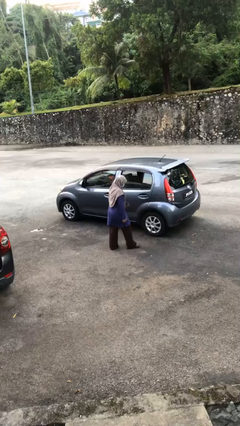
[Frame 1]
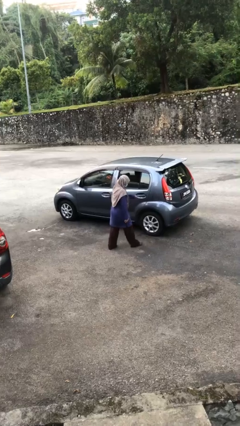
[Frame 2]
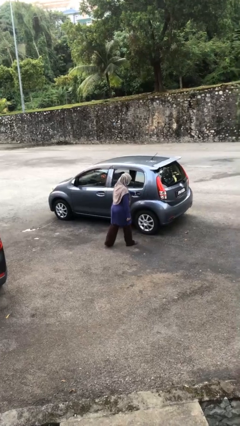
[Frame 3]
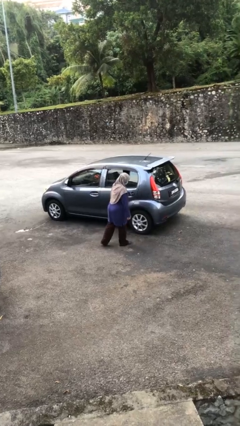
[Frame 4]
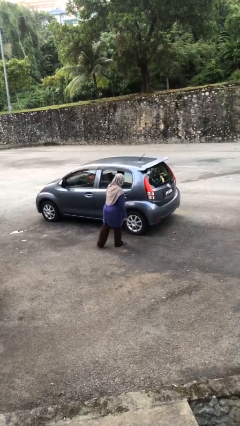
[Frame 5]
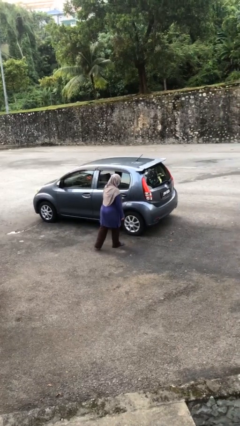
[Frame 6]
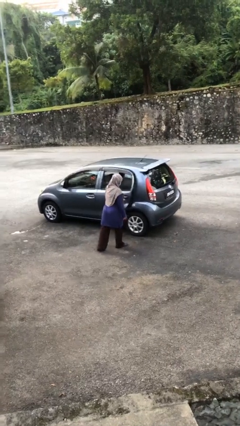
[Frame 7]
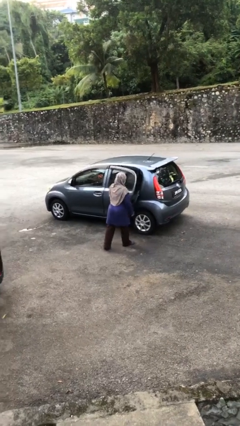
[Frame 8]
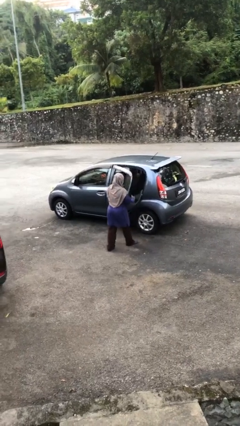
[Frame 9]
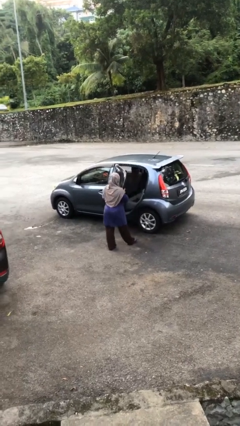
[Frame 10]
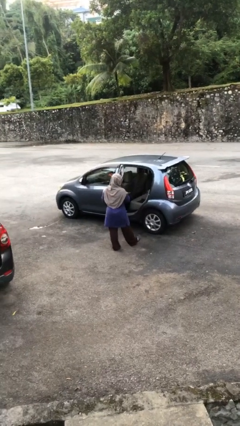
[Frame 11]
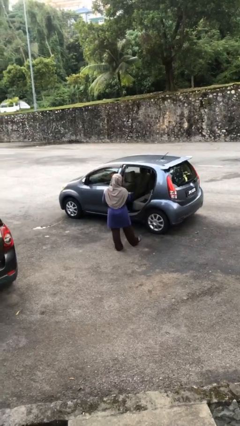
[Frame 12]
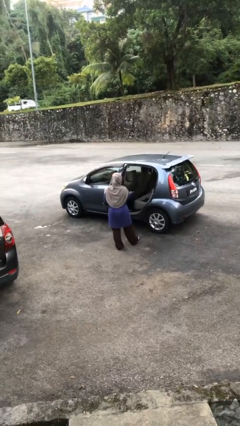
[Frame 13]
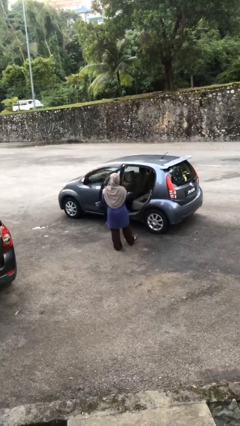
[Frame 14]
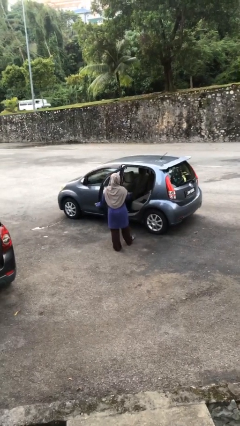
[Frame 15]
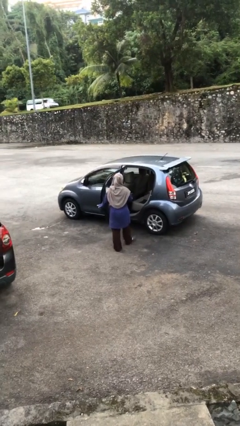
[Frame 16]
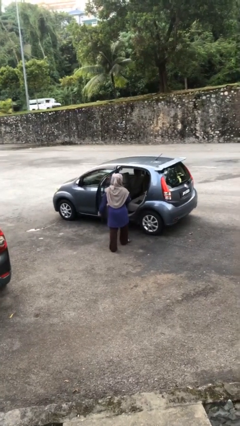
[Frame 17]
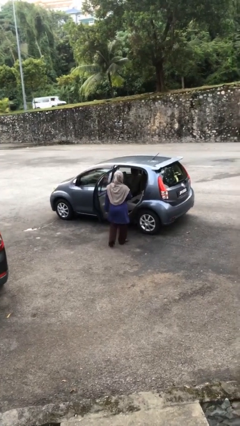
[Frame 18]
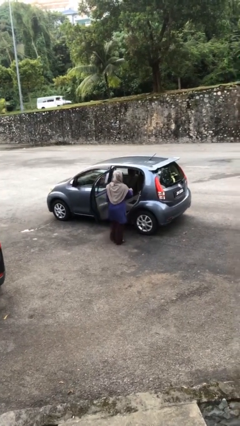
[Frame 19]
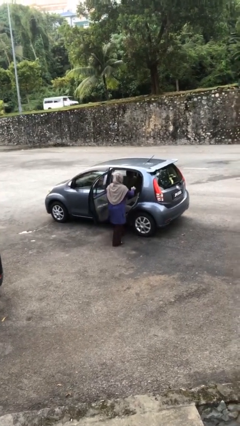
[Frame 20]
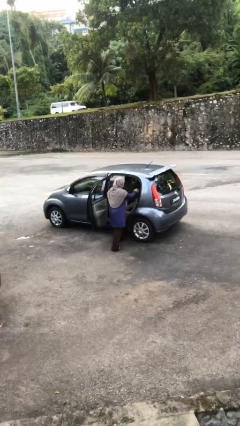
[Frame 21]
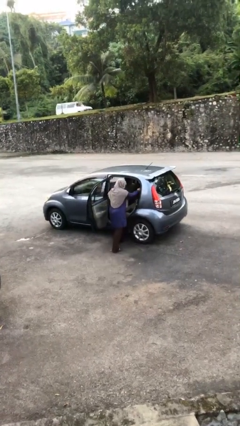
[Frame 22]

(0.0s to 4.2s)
person opens car door

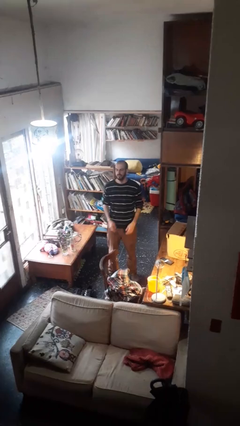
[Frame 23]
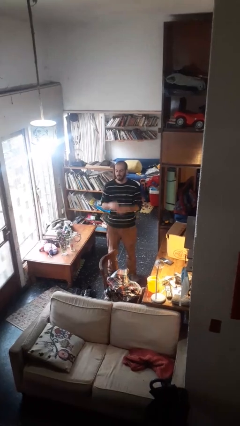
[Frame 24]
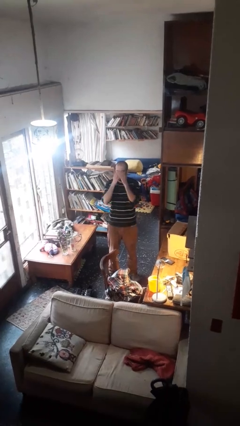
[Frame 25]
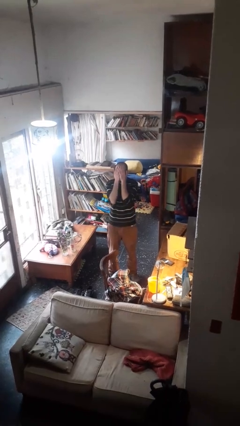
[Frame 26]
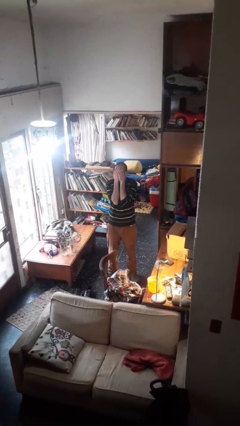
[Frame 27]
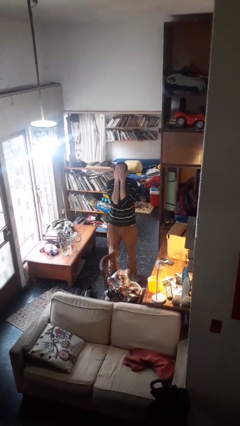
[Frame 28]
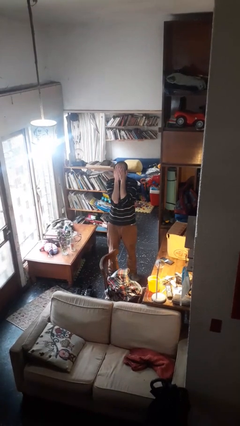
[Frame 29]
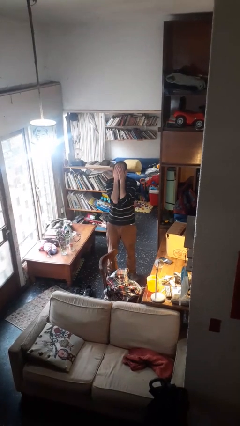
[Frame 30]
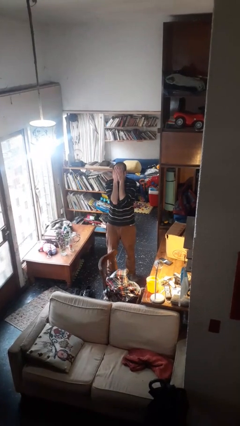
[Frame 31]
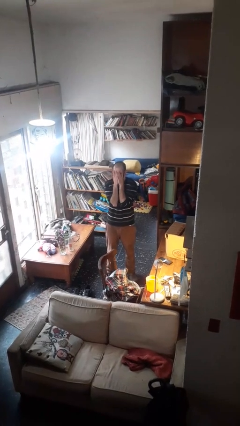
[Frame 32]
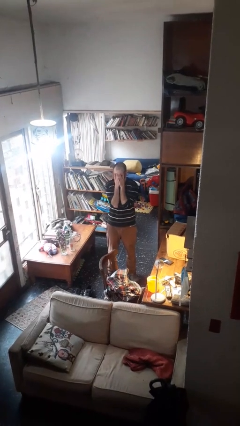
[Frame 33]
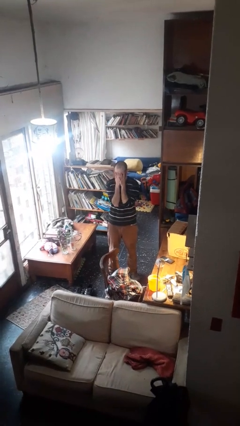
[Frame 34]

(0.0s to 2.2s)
person covers face with hands

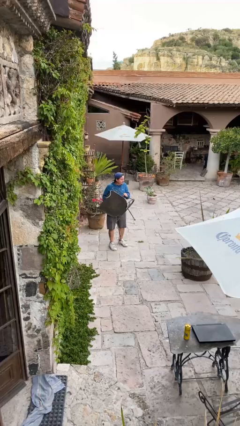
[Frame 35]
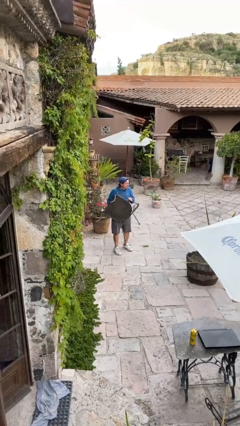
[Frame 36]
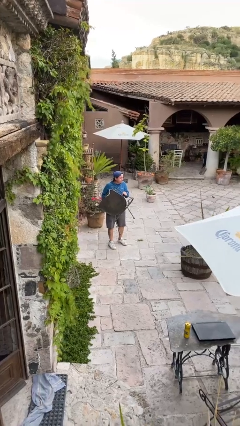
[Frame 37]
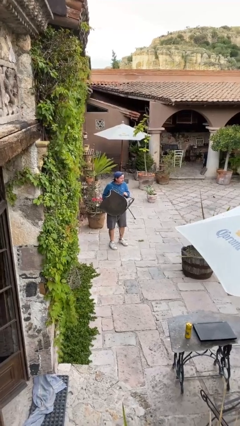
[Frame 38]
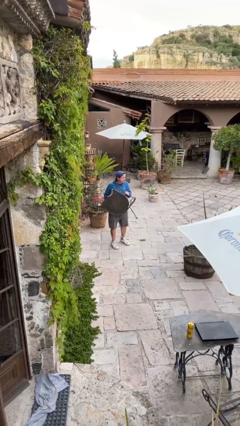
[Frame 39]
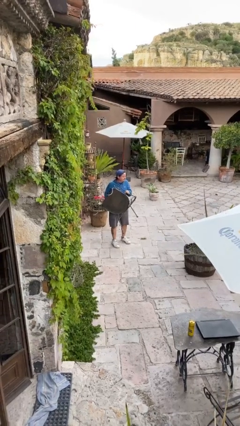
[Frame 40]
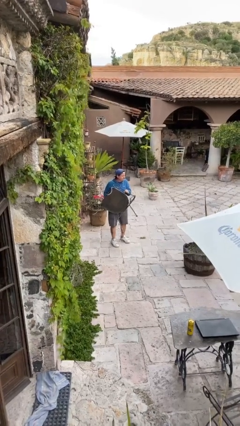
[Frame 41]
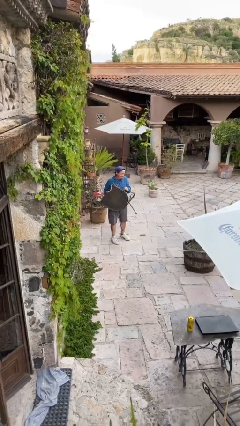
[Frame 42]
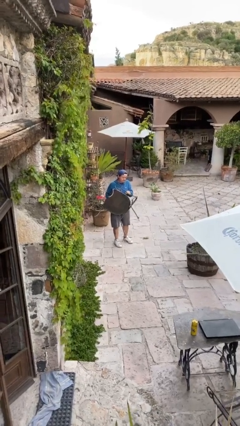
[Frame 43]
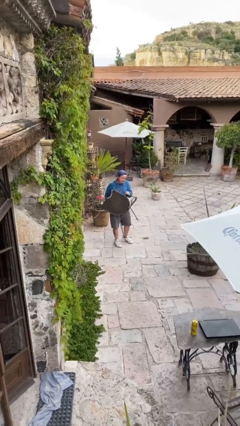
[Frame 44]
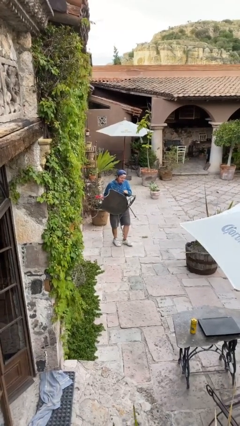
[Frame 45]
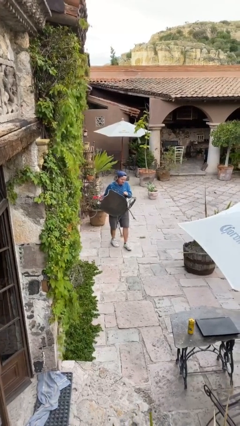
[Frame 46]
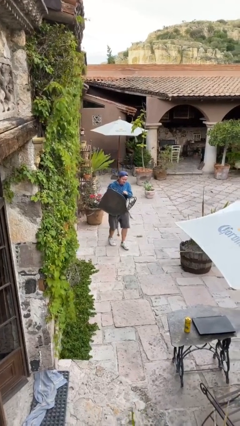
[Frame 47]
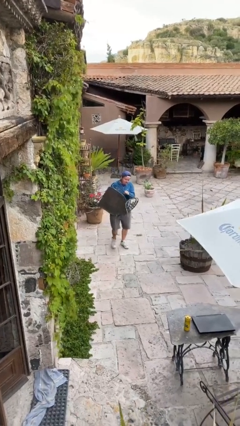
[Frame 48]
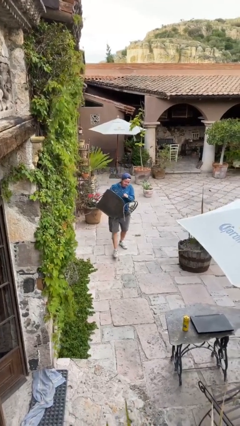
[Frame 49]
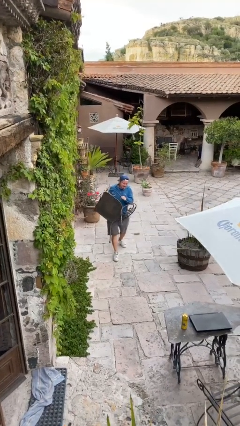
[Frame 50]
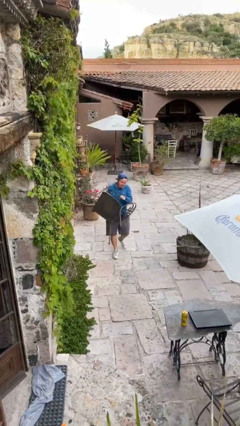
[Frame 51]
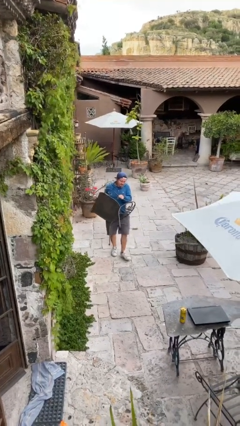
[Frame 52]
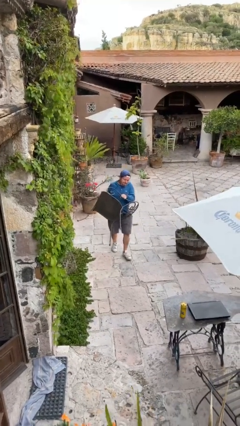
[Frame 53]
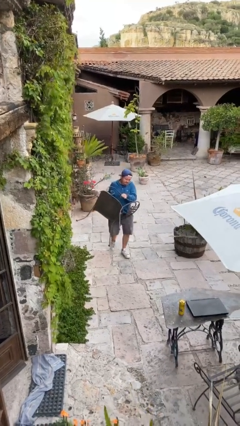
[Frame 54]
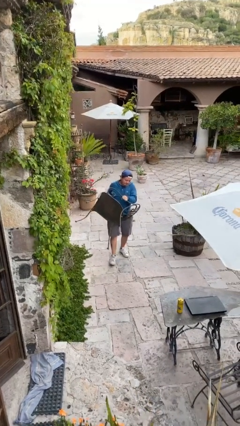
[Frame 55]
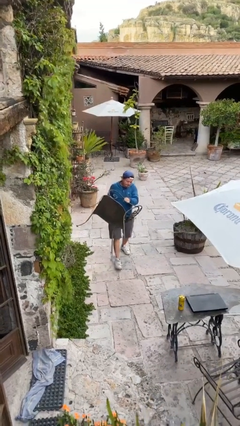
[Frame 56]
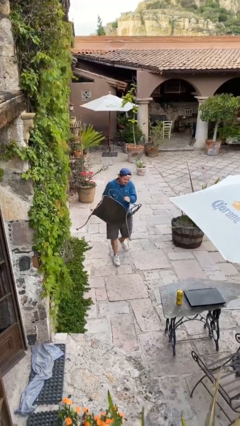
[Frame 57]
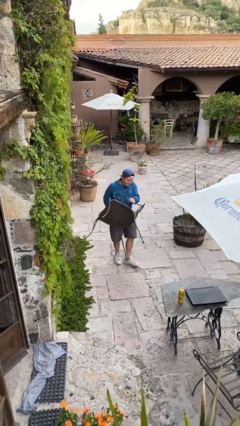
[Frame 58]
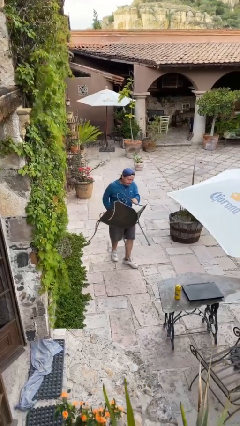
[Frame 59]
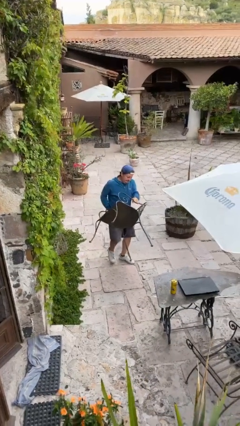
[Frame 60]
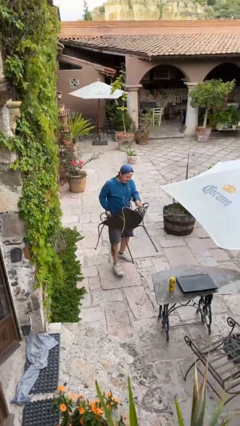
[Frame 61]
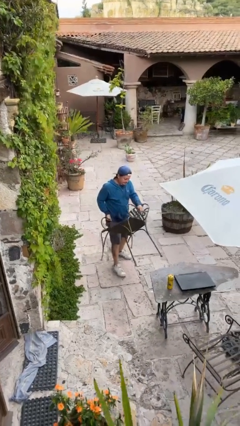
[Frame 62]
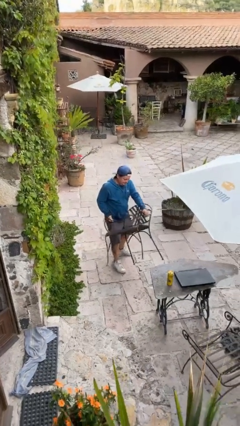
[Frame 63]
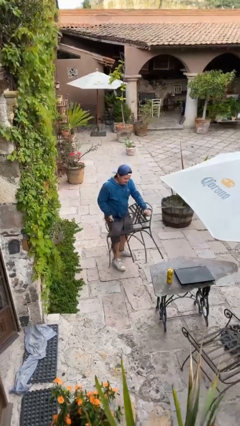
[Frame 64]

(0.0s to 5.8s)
person carries heavy object

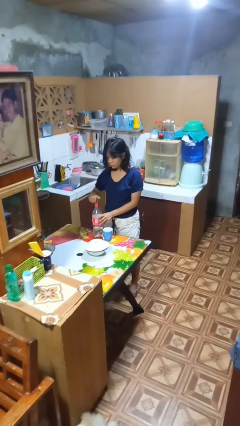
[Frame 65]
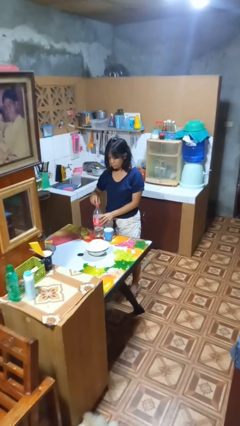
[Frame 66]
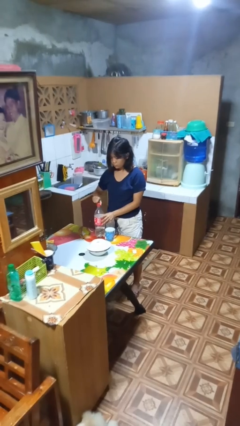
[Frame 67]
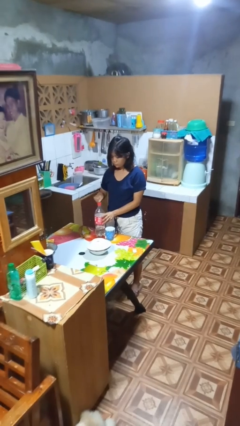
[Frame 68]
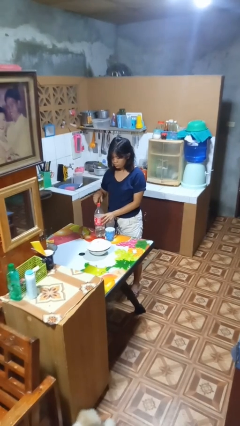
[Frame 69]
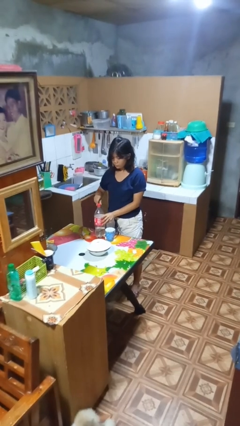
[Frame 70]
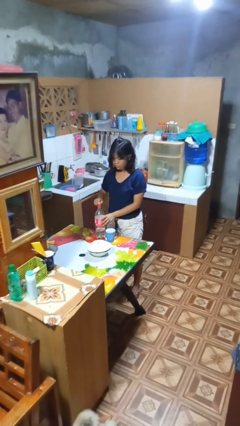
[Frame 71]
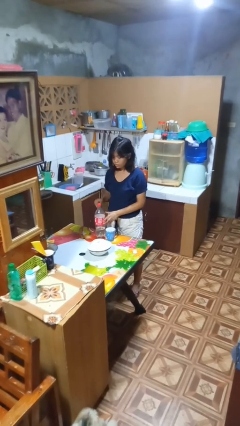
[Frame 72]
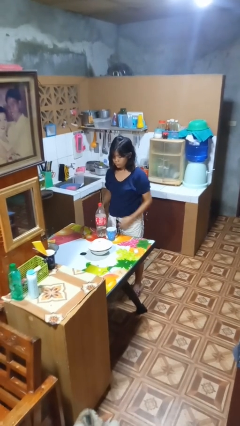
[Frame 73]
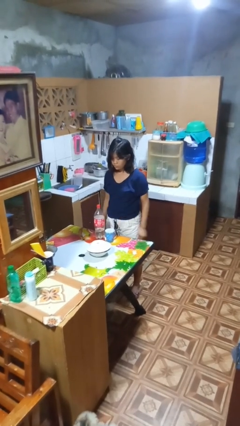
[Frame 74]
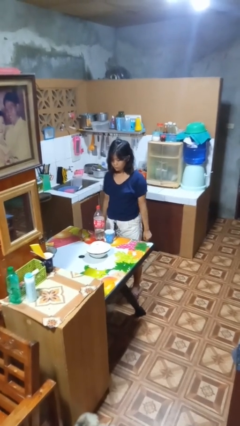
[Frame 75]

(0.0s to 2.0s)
person screws lid to bottle

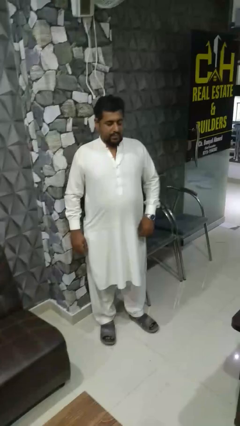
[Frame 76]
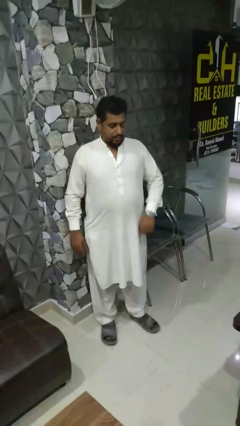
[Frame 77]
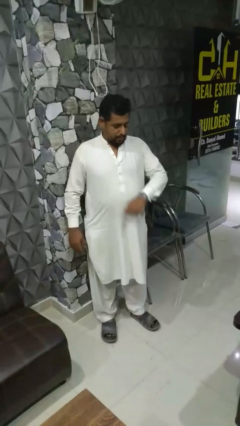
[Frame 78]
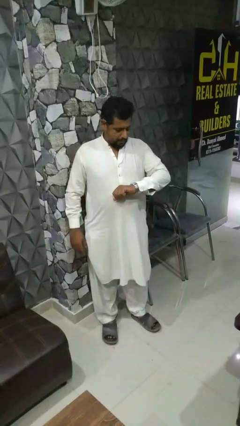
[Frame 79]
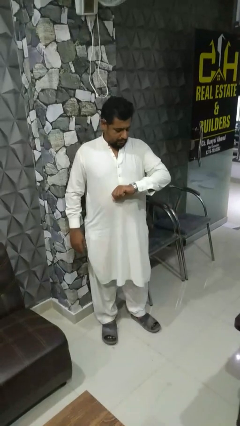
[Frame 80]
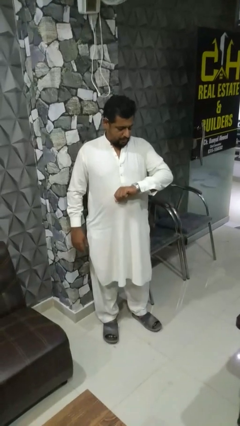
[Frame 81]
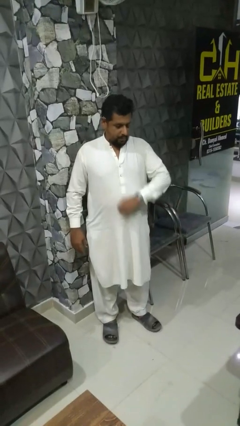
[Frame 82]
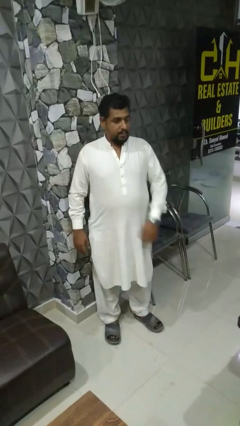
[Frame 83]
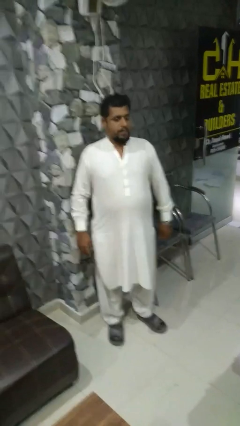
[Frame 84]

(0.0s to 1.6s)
person looks at wristwatch

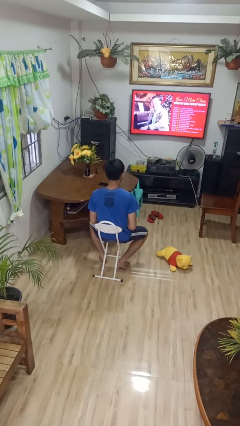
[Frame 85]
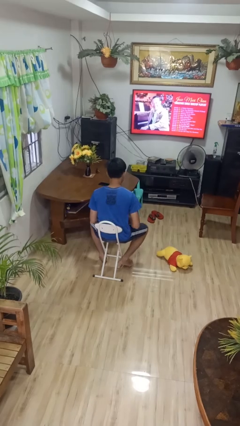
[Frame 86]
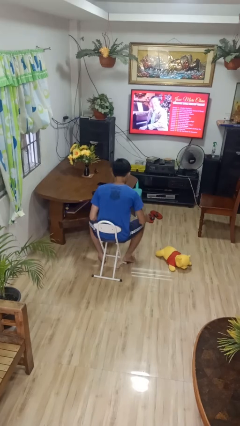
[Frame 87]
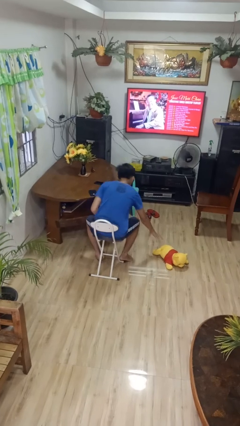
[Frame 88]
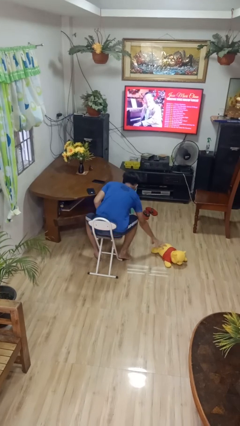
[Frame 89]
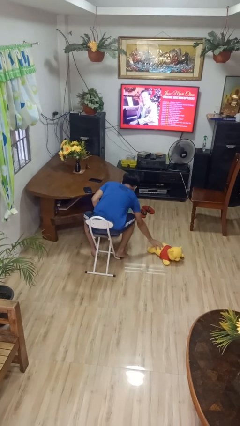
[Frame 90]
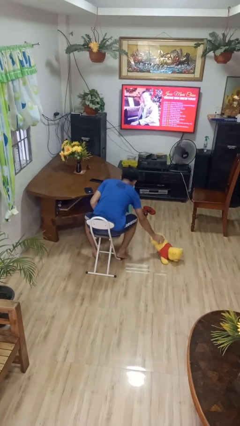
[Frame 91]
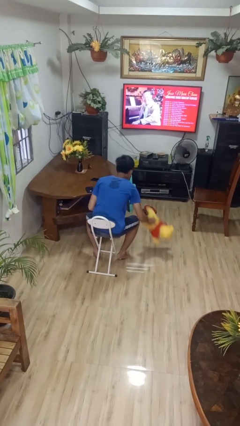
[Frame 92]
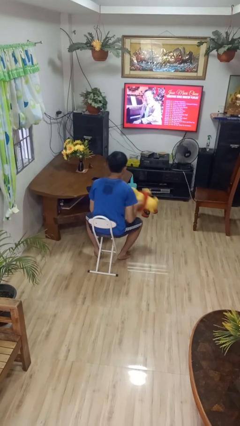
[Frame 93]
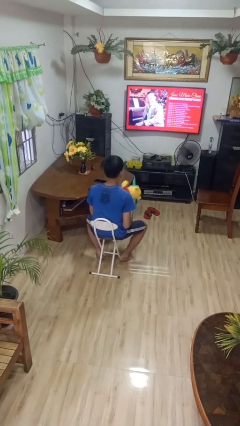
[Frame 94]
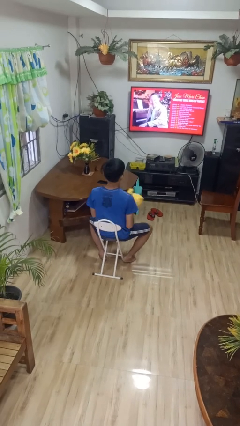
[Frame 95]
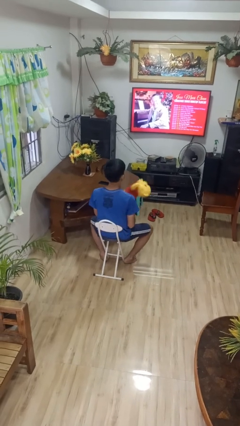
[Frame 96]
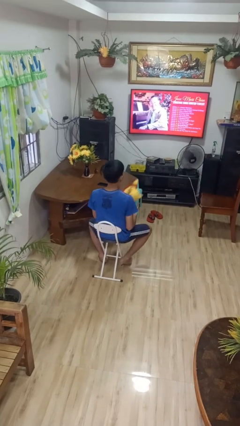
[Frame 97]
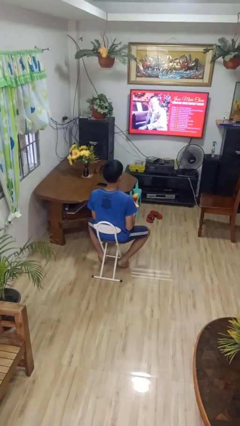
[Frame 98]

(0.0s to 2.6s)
person picks up object from floor
